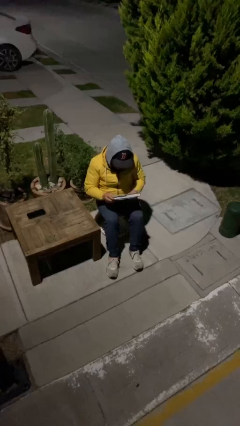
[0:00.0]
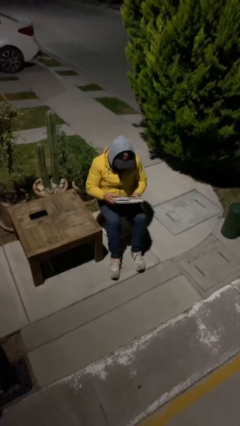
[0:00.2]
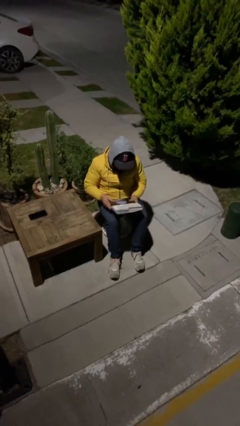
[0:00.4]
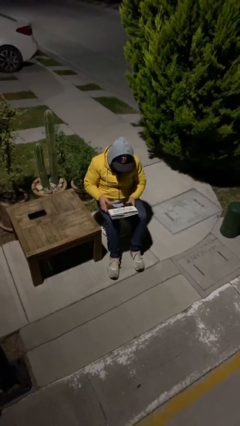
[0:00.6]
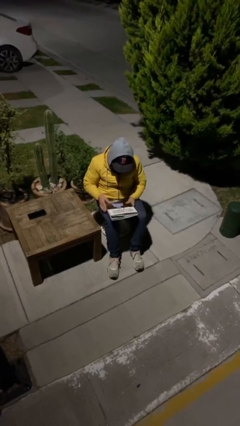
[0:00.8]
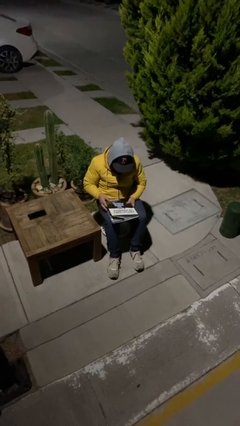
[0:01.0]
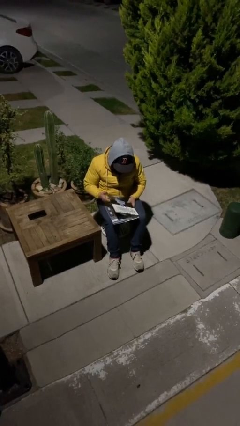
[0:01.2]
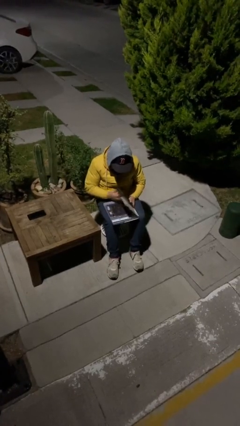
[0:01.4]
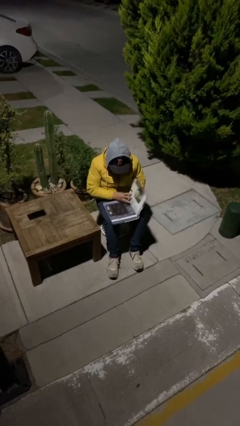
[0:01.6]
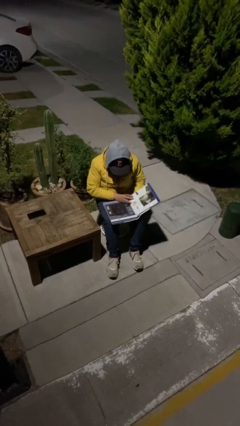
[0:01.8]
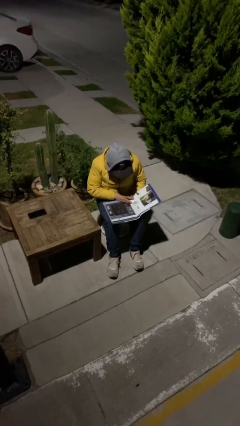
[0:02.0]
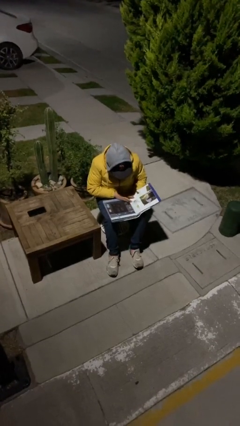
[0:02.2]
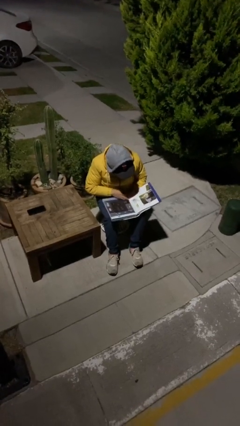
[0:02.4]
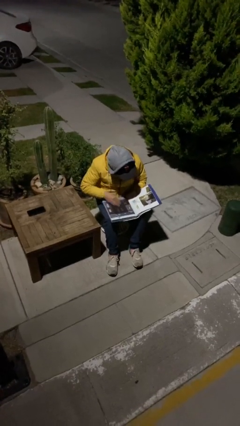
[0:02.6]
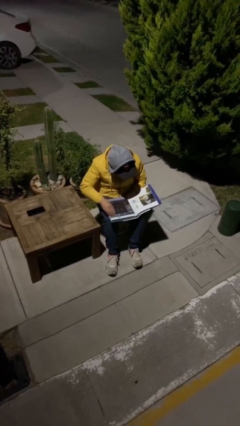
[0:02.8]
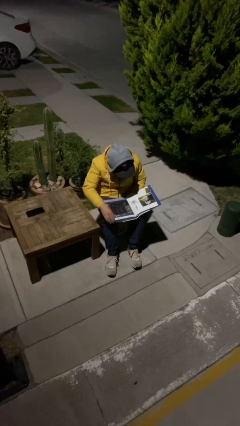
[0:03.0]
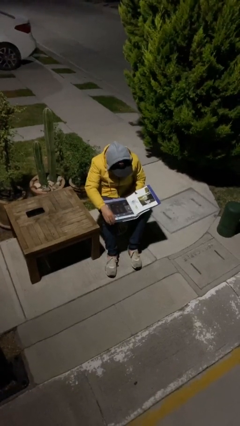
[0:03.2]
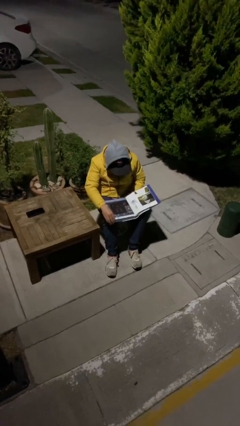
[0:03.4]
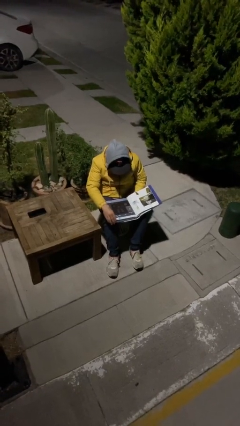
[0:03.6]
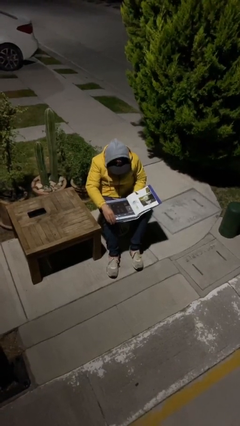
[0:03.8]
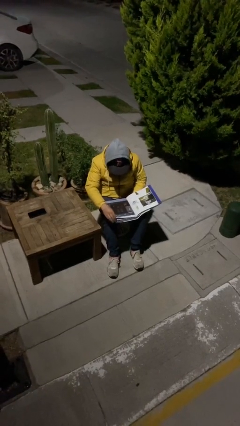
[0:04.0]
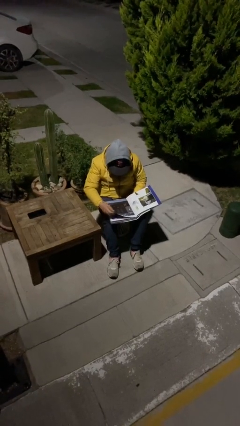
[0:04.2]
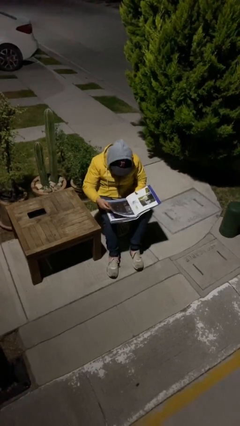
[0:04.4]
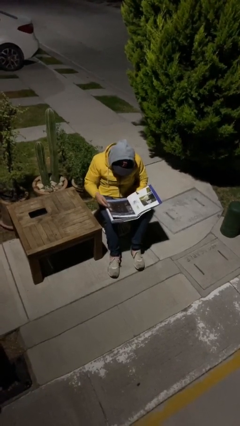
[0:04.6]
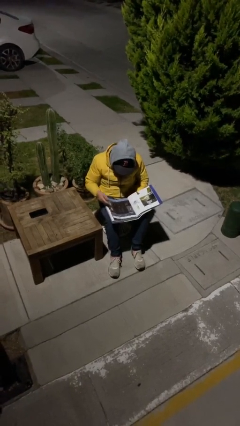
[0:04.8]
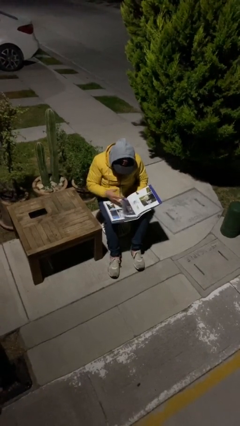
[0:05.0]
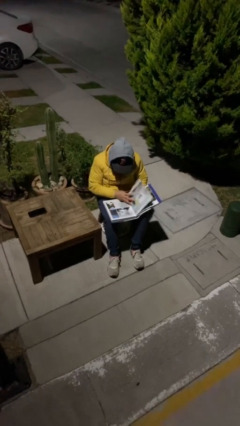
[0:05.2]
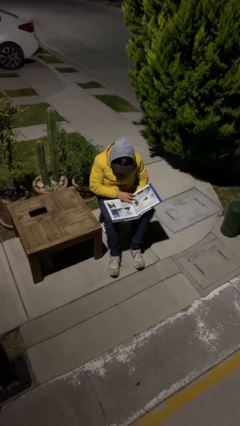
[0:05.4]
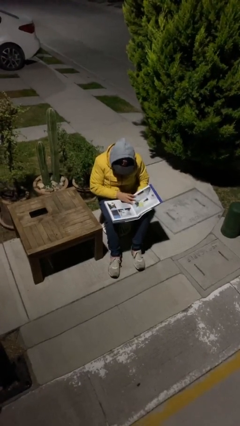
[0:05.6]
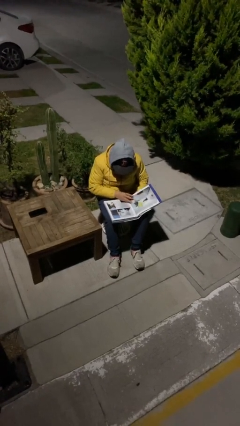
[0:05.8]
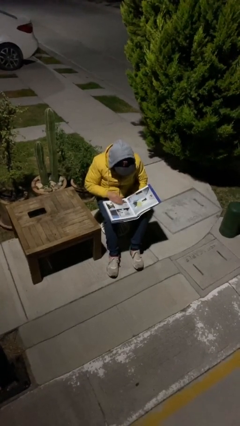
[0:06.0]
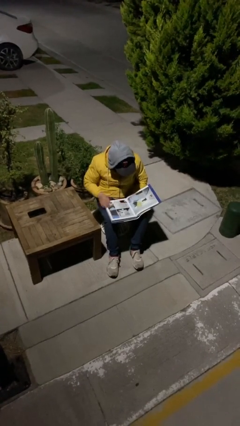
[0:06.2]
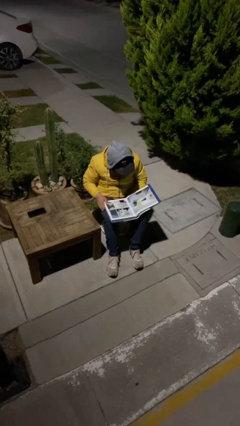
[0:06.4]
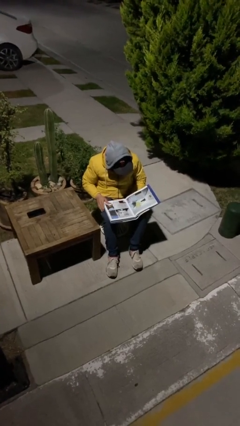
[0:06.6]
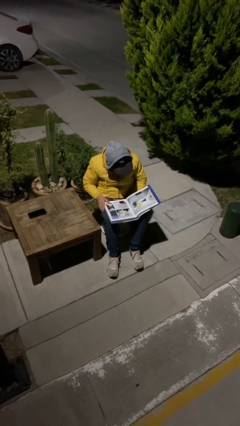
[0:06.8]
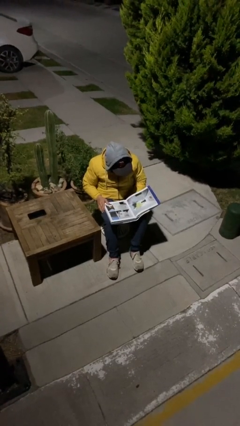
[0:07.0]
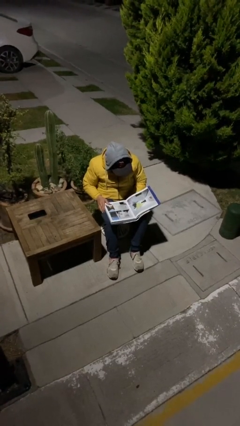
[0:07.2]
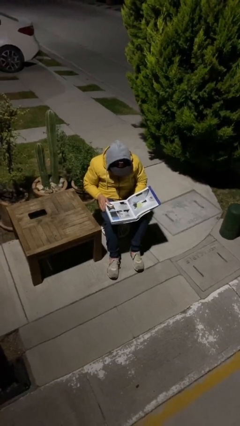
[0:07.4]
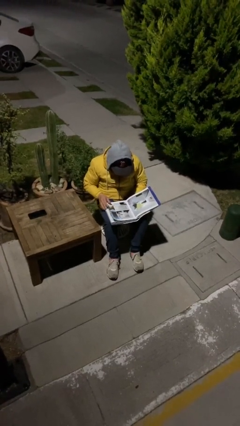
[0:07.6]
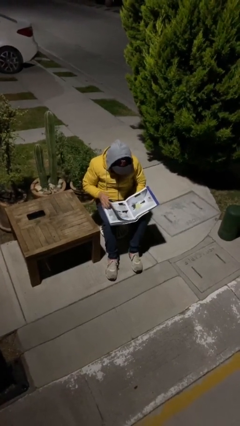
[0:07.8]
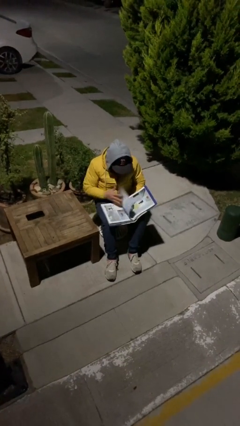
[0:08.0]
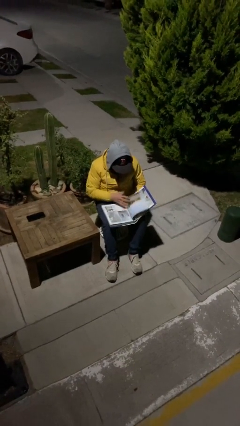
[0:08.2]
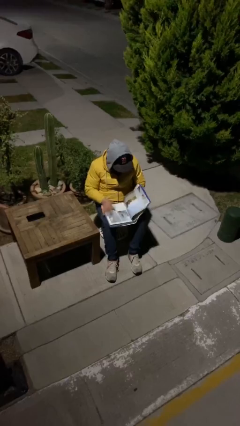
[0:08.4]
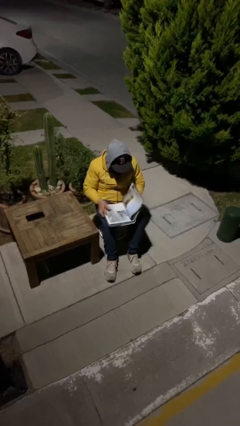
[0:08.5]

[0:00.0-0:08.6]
person reads document

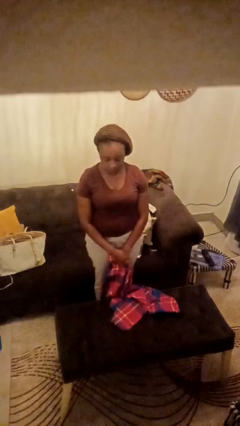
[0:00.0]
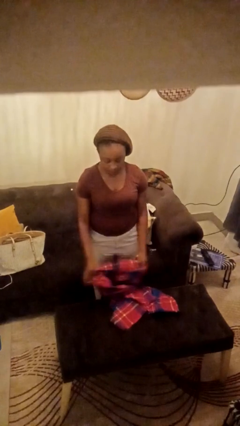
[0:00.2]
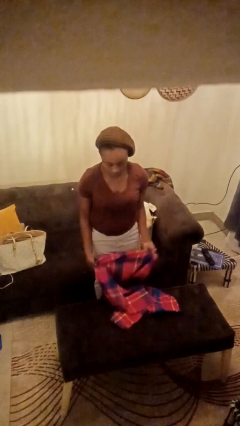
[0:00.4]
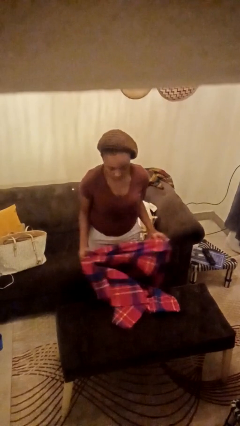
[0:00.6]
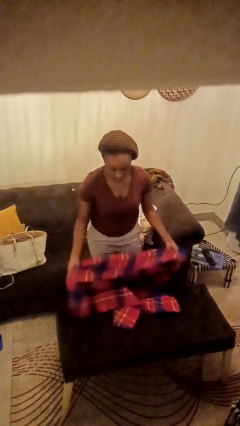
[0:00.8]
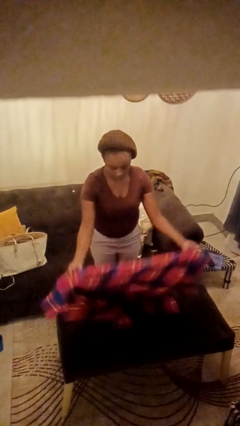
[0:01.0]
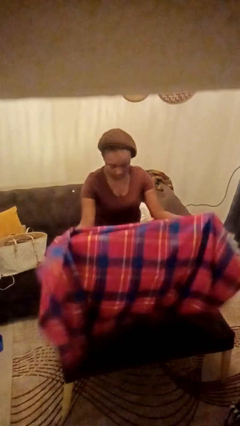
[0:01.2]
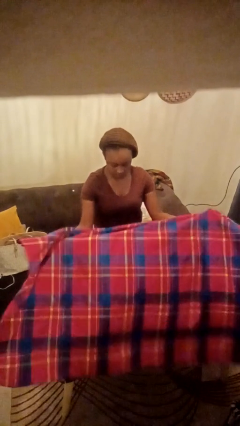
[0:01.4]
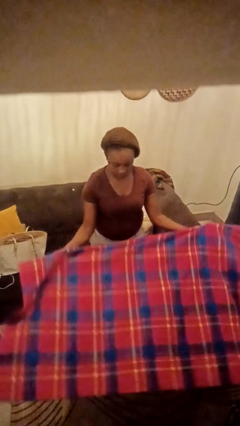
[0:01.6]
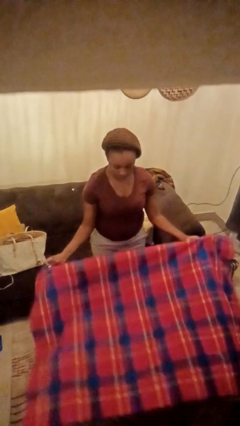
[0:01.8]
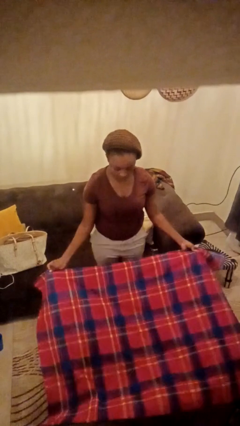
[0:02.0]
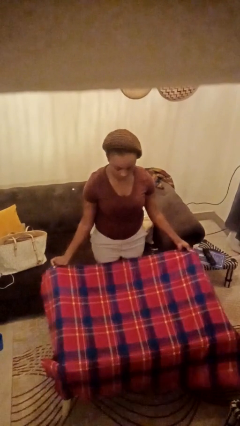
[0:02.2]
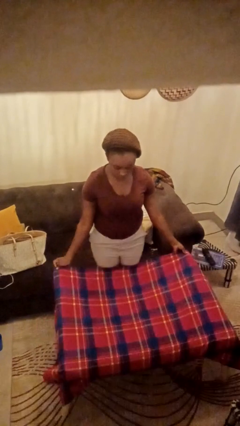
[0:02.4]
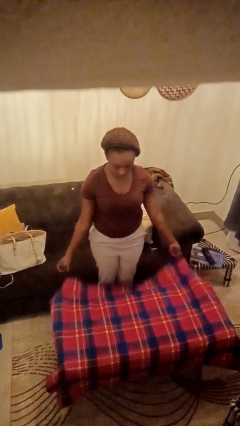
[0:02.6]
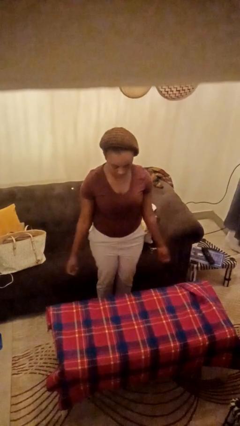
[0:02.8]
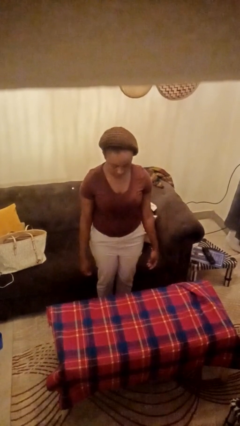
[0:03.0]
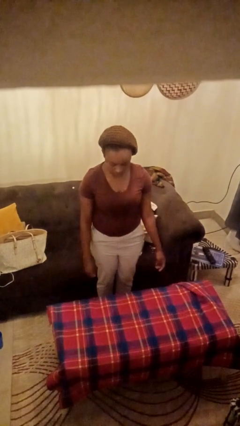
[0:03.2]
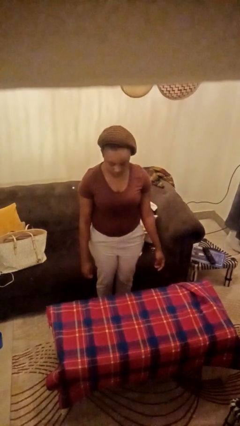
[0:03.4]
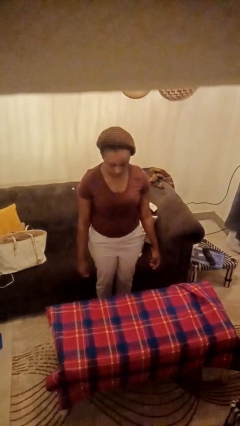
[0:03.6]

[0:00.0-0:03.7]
person spreads tablecloth

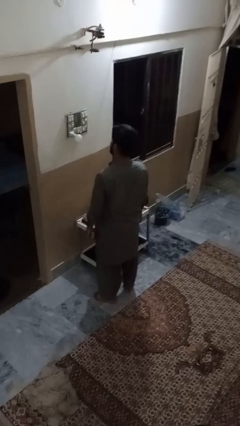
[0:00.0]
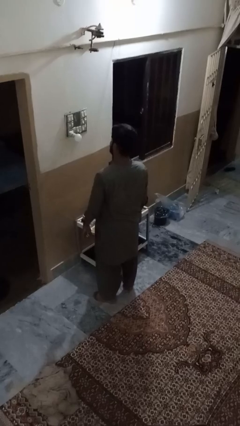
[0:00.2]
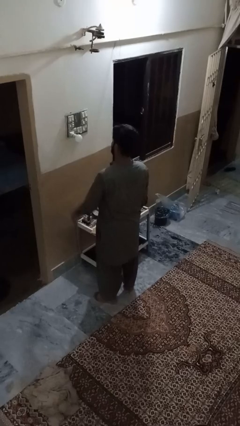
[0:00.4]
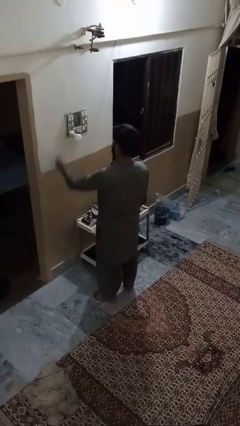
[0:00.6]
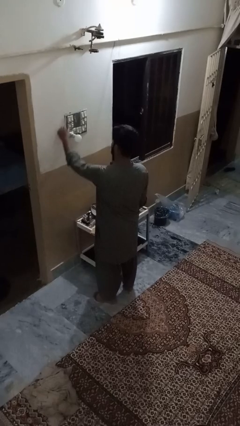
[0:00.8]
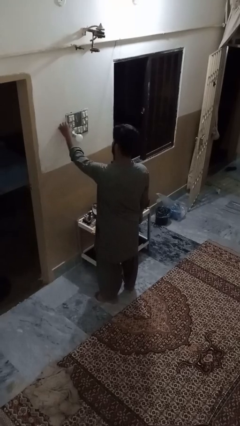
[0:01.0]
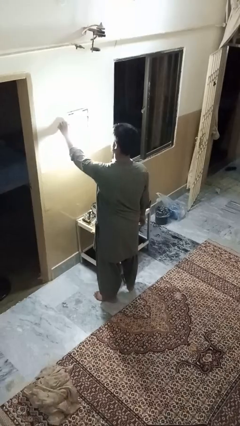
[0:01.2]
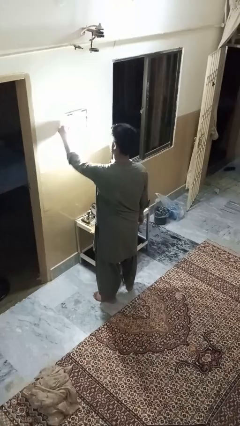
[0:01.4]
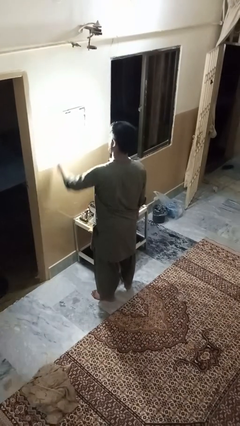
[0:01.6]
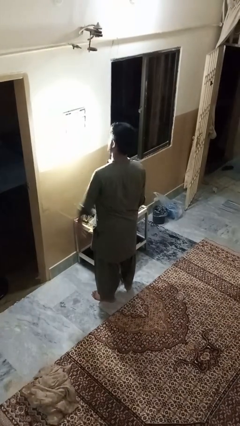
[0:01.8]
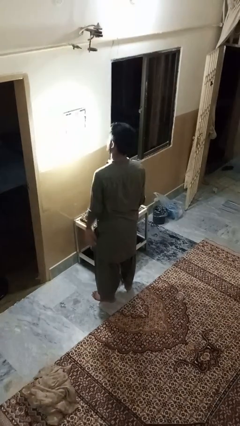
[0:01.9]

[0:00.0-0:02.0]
person turns on lamp

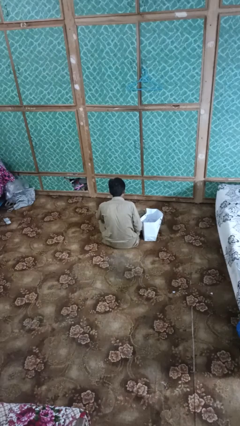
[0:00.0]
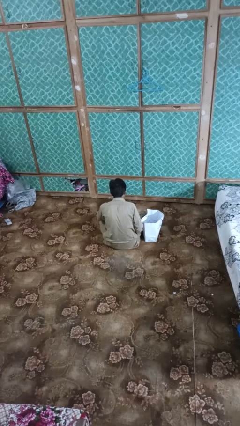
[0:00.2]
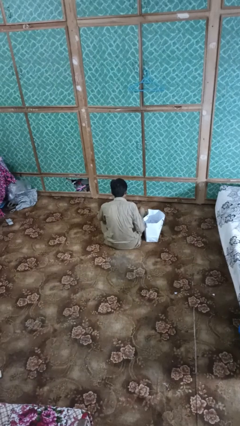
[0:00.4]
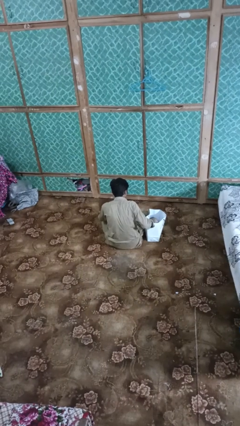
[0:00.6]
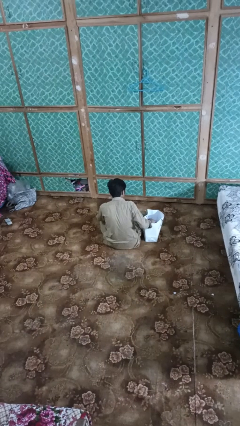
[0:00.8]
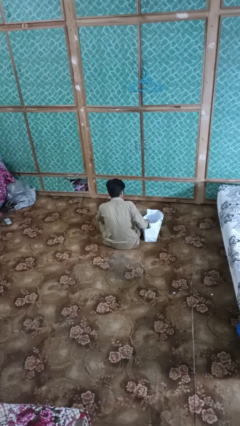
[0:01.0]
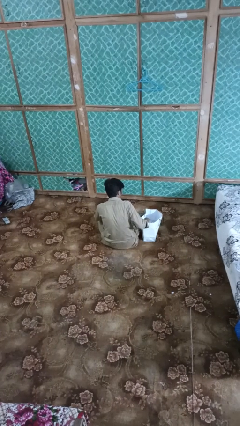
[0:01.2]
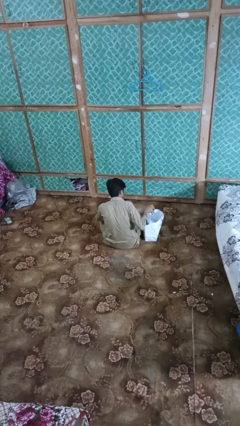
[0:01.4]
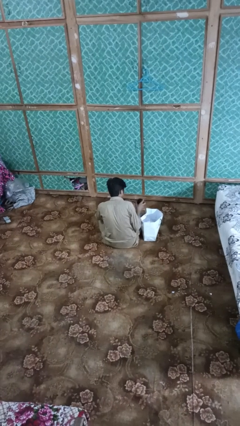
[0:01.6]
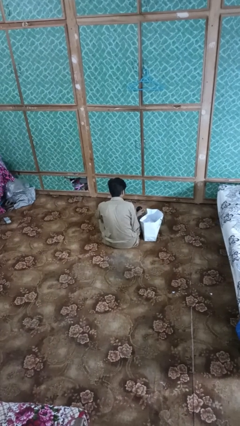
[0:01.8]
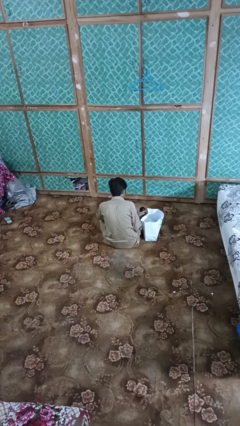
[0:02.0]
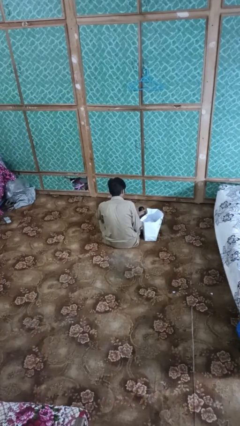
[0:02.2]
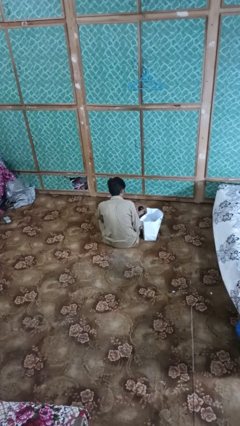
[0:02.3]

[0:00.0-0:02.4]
person takes object from bag

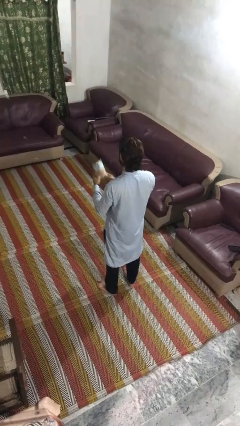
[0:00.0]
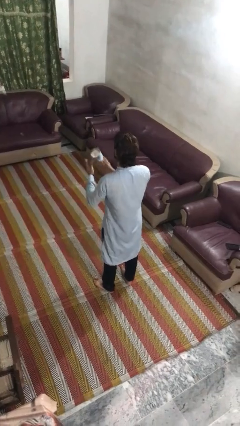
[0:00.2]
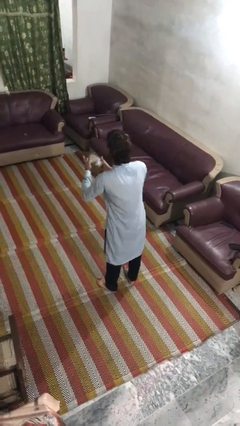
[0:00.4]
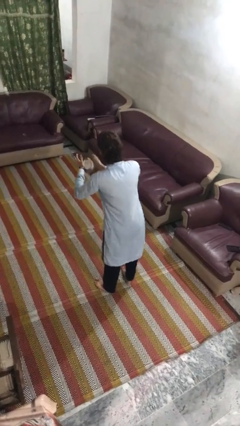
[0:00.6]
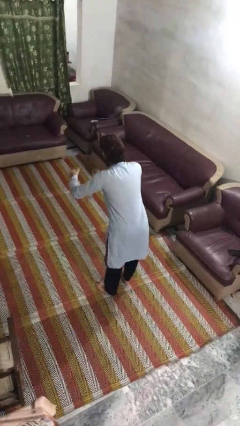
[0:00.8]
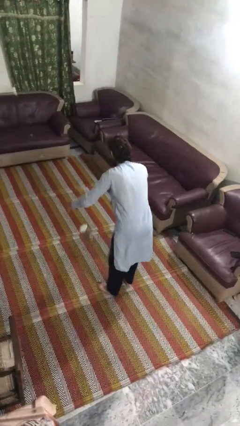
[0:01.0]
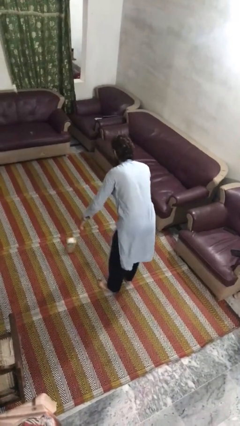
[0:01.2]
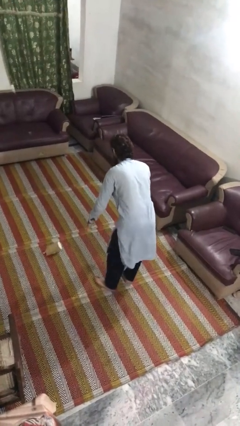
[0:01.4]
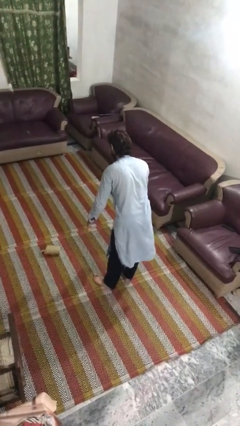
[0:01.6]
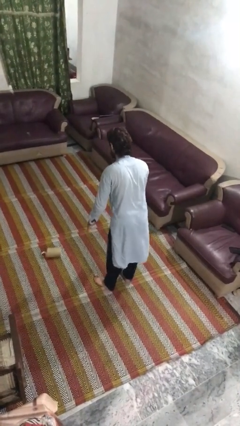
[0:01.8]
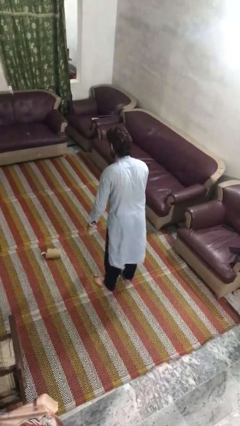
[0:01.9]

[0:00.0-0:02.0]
person drops object
